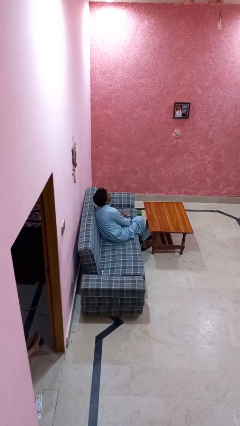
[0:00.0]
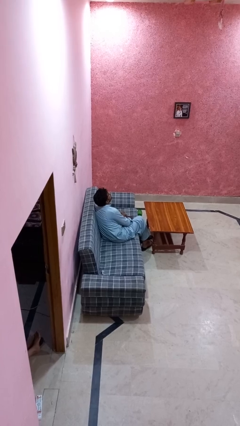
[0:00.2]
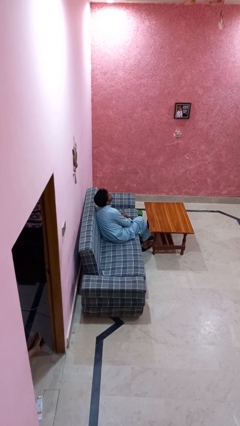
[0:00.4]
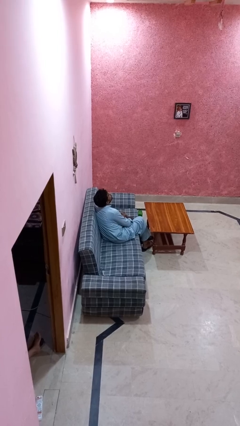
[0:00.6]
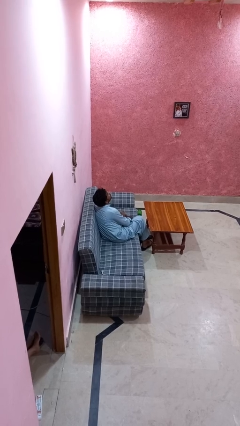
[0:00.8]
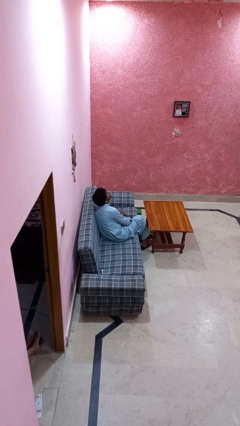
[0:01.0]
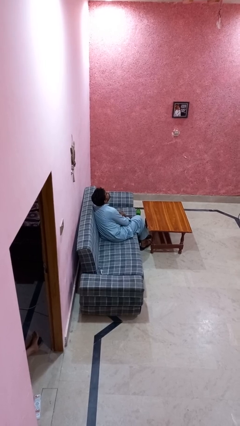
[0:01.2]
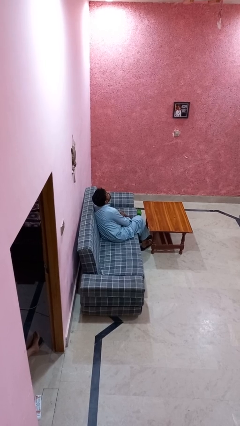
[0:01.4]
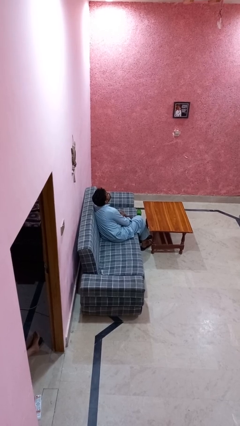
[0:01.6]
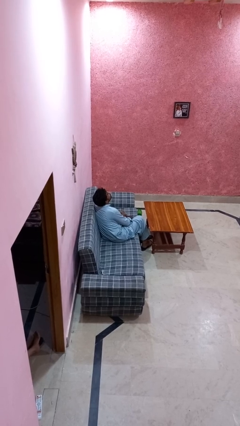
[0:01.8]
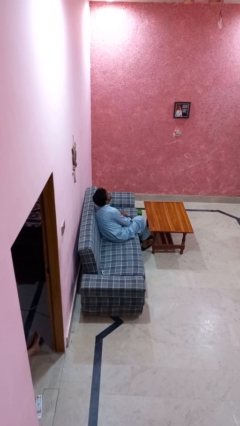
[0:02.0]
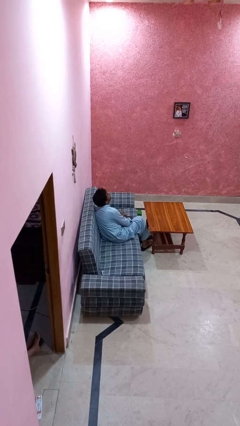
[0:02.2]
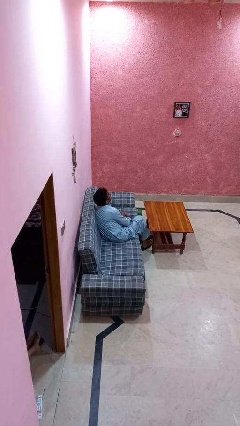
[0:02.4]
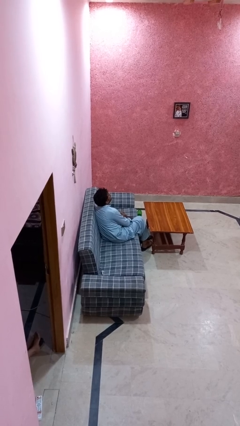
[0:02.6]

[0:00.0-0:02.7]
person sticks out tongue

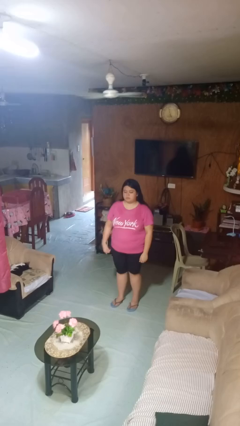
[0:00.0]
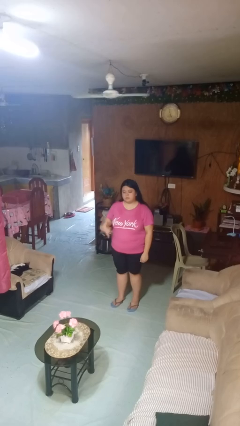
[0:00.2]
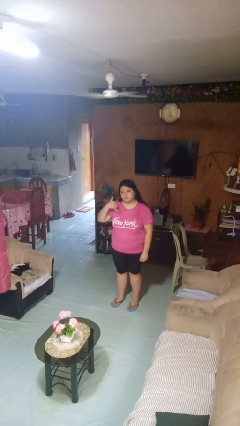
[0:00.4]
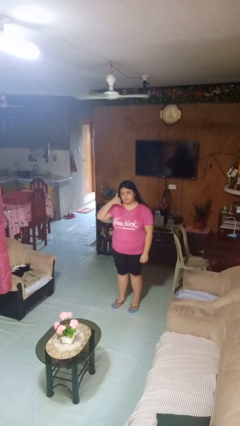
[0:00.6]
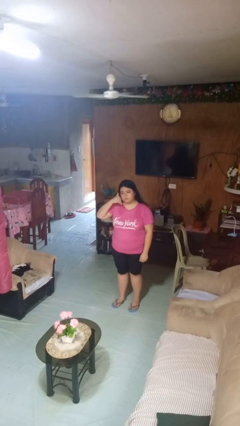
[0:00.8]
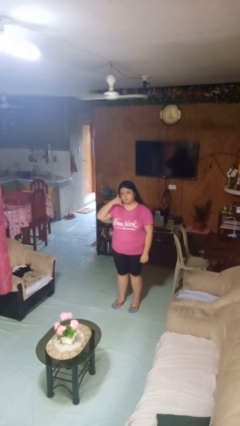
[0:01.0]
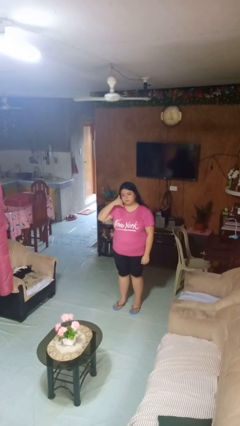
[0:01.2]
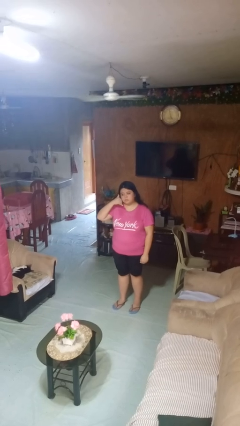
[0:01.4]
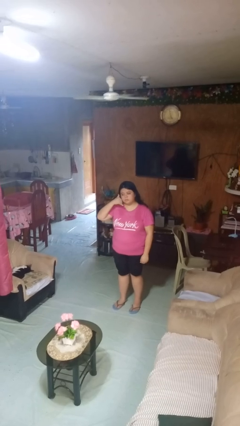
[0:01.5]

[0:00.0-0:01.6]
person gestures call me

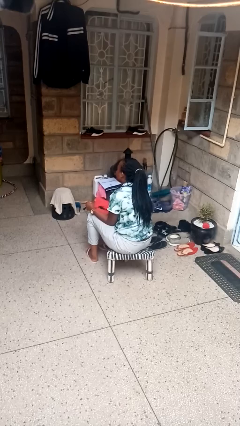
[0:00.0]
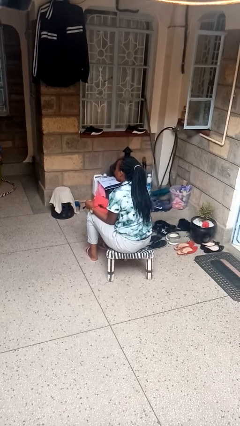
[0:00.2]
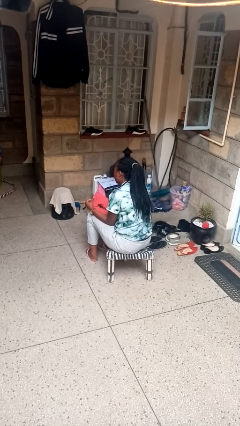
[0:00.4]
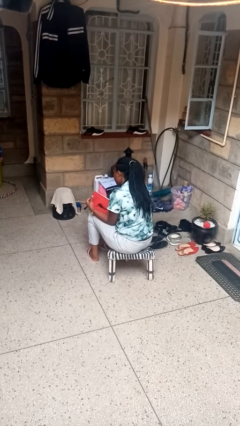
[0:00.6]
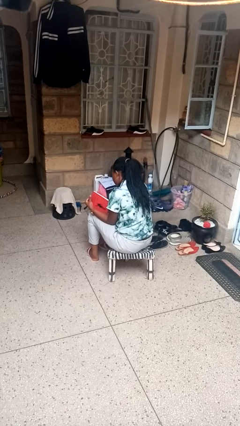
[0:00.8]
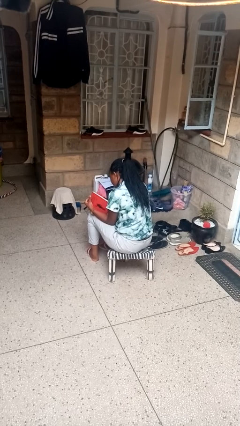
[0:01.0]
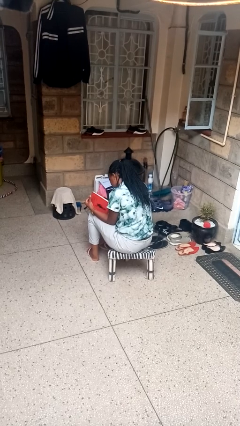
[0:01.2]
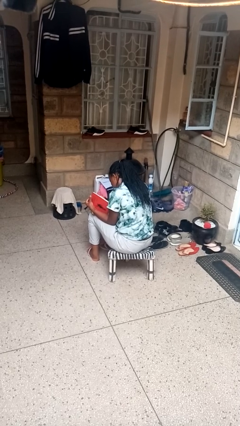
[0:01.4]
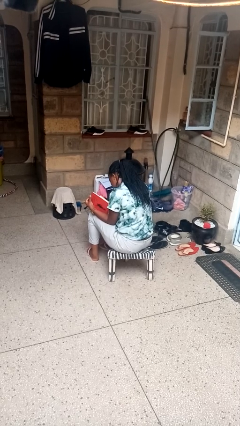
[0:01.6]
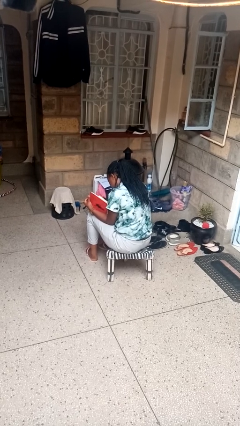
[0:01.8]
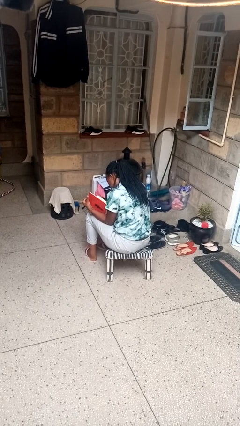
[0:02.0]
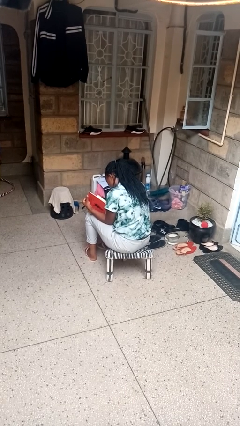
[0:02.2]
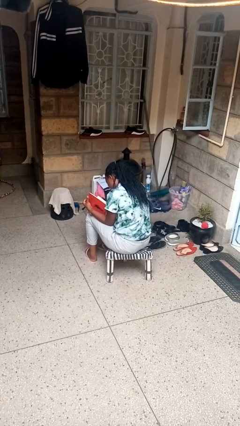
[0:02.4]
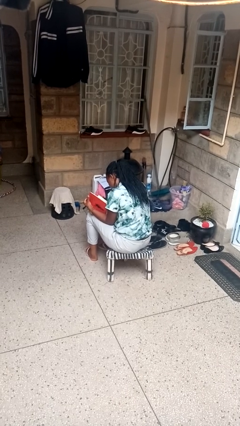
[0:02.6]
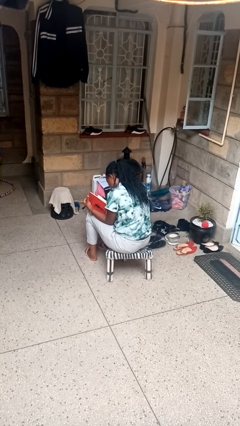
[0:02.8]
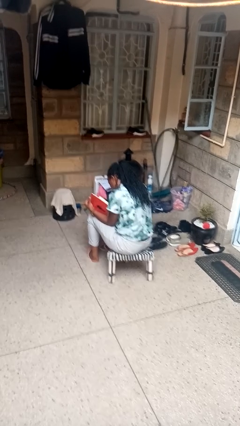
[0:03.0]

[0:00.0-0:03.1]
person reads book

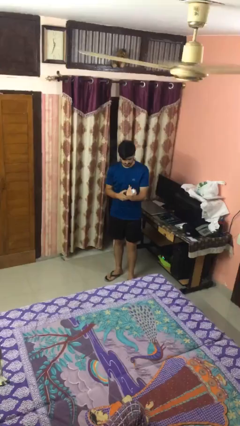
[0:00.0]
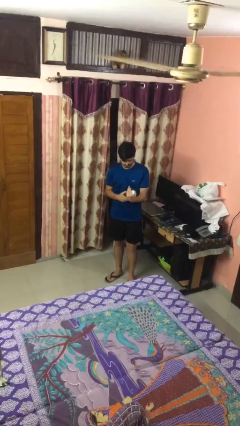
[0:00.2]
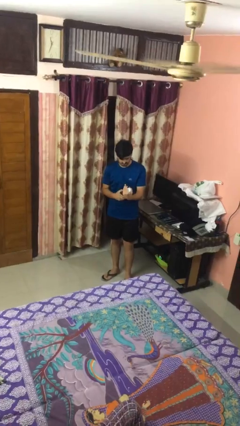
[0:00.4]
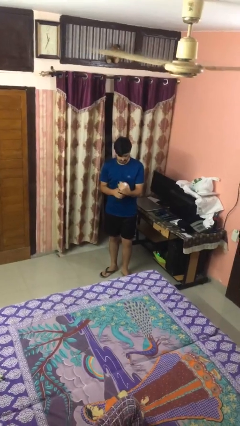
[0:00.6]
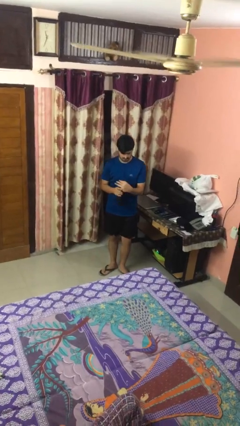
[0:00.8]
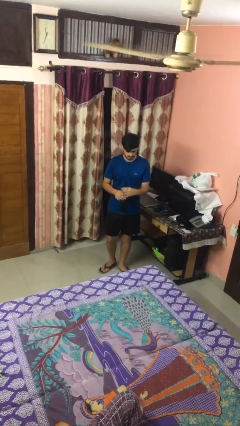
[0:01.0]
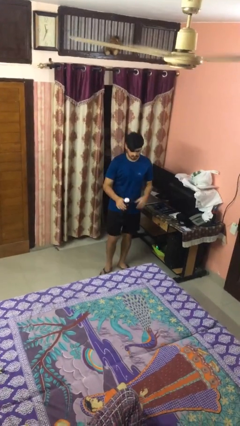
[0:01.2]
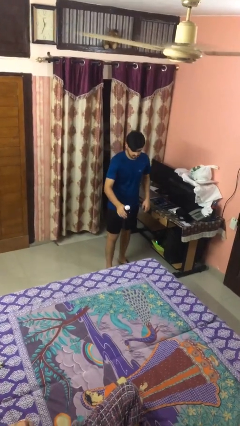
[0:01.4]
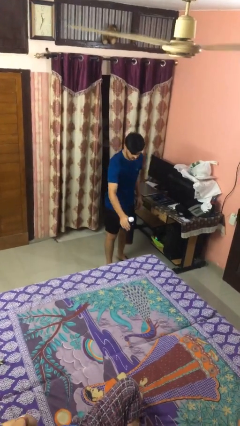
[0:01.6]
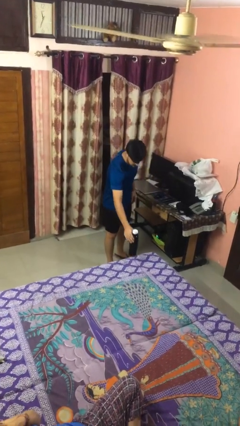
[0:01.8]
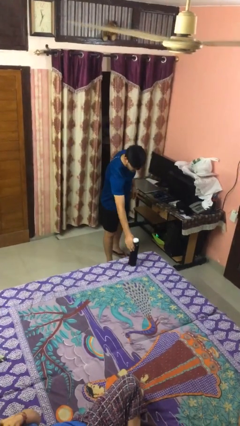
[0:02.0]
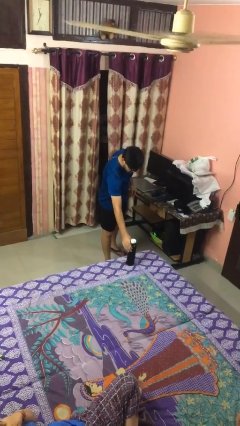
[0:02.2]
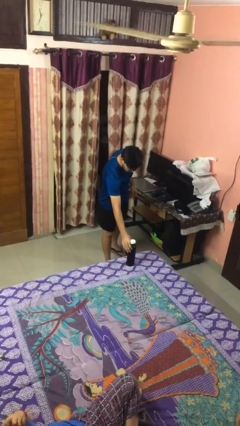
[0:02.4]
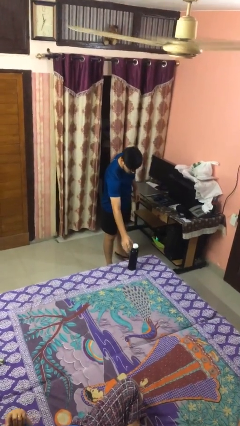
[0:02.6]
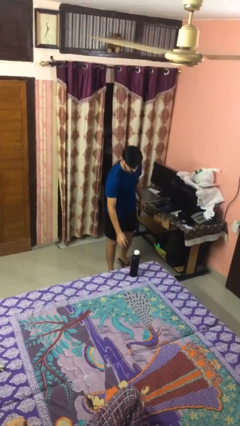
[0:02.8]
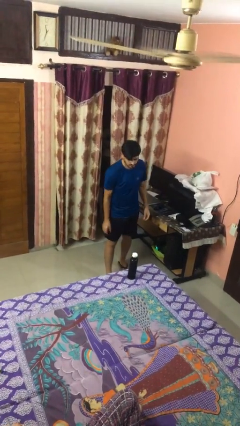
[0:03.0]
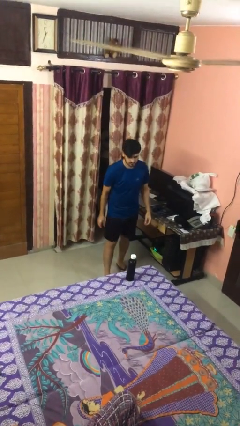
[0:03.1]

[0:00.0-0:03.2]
person puts down object on bed

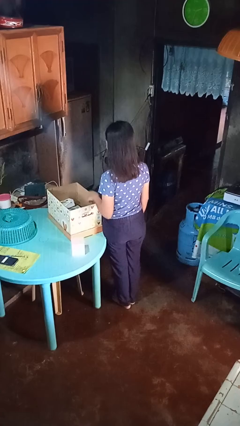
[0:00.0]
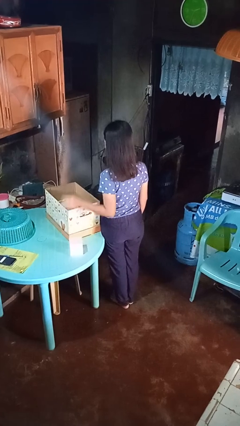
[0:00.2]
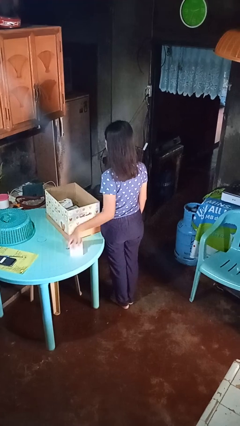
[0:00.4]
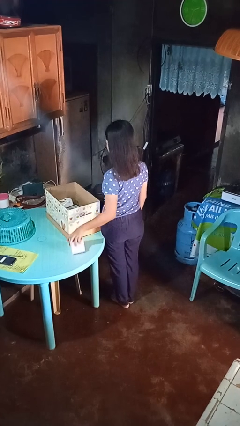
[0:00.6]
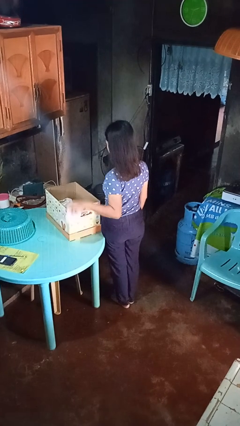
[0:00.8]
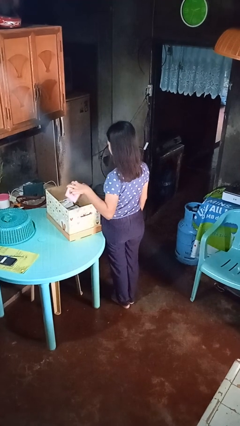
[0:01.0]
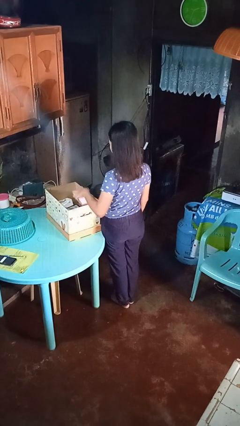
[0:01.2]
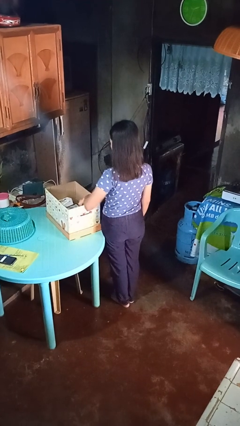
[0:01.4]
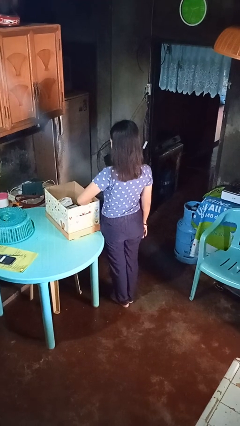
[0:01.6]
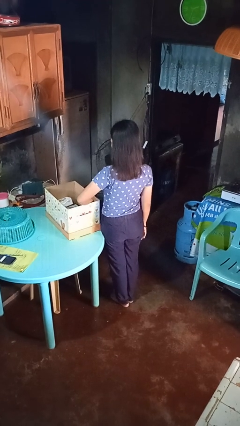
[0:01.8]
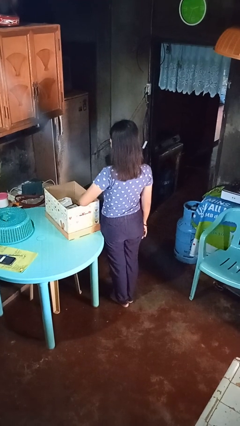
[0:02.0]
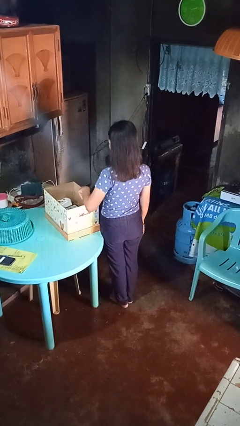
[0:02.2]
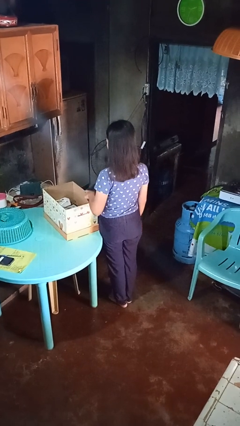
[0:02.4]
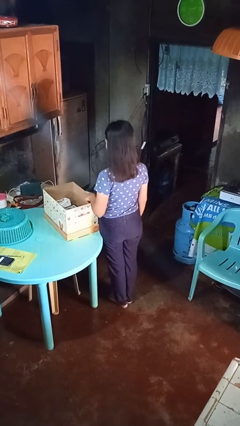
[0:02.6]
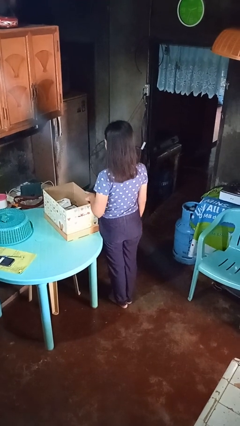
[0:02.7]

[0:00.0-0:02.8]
person puts object into box

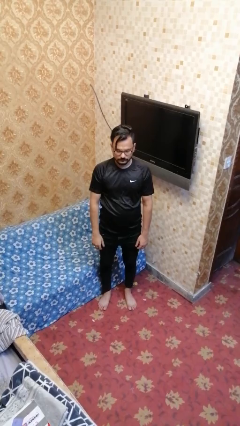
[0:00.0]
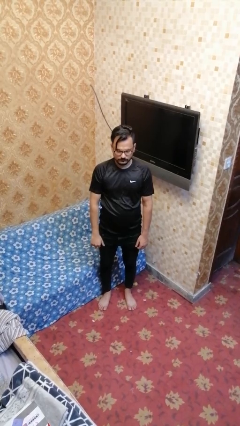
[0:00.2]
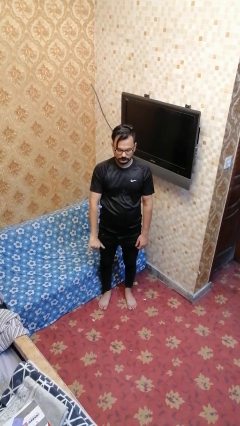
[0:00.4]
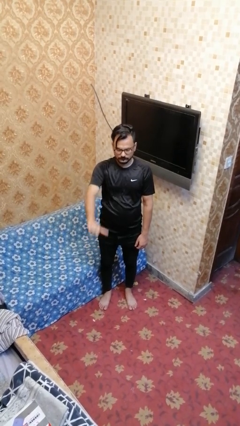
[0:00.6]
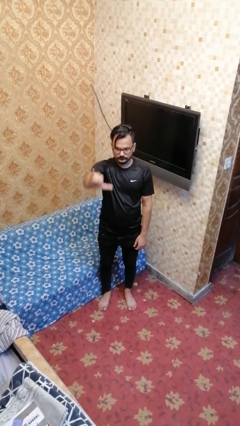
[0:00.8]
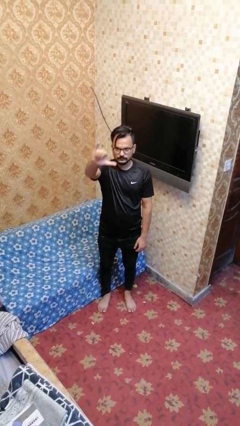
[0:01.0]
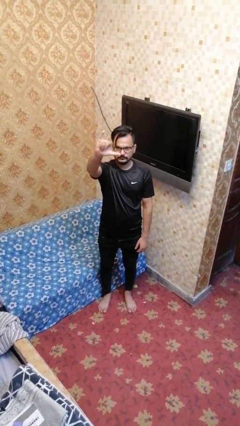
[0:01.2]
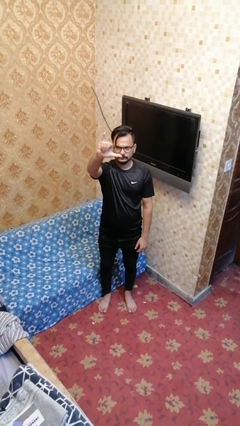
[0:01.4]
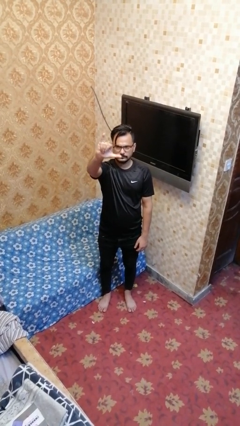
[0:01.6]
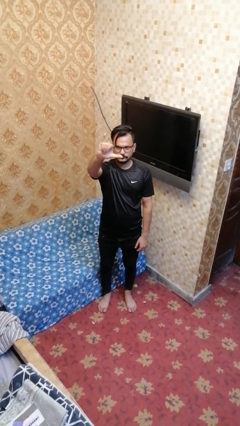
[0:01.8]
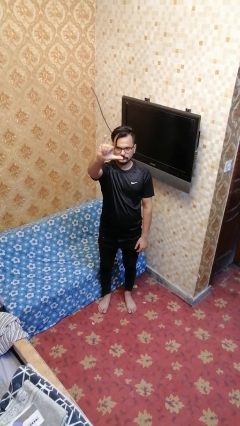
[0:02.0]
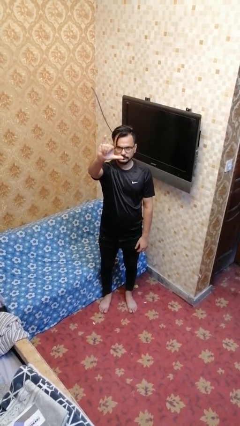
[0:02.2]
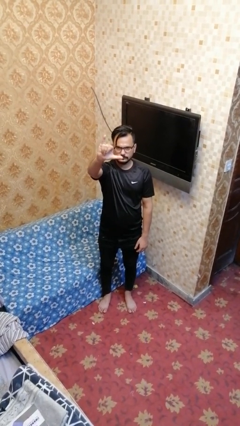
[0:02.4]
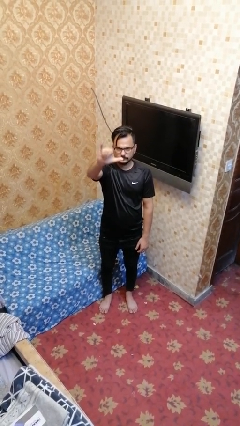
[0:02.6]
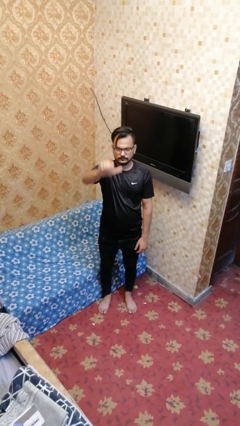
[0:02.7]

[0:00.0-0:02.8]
person gestures hang loose

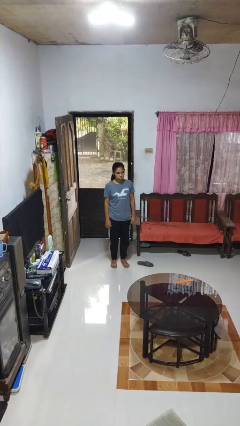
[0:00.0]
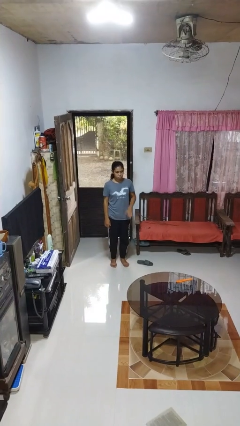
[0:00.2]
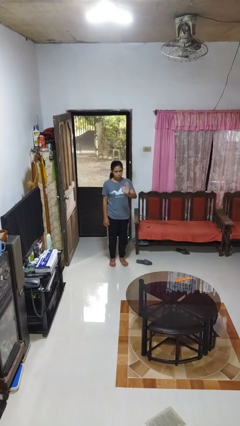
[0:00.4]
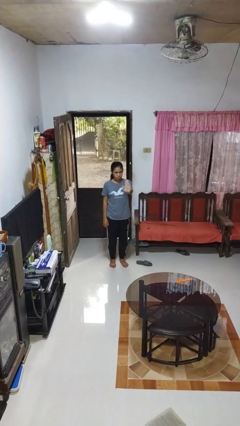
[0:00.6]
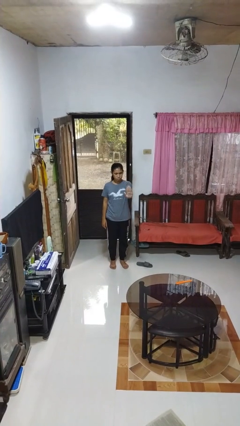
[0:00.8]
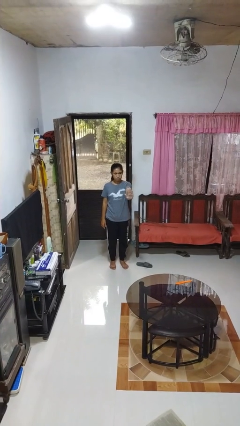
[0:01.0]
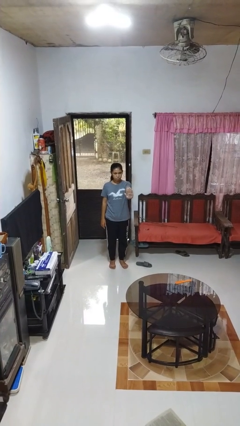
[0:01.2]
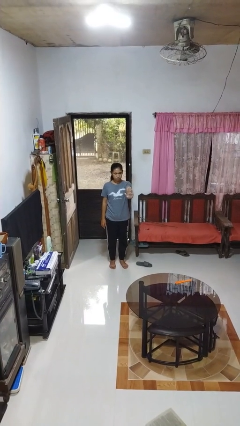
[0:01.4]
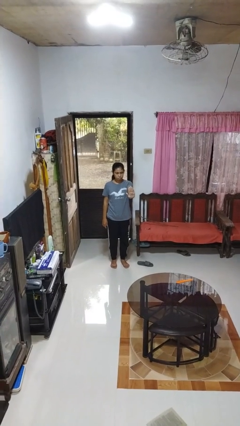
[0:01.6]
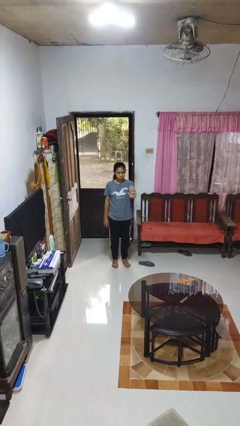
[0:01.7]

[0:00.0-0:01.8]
person gestures stop
